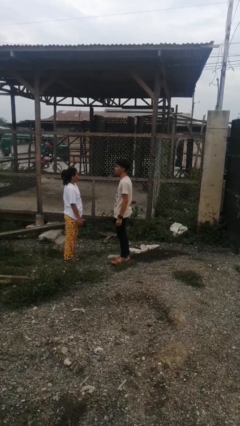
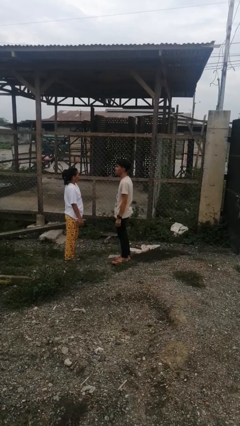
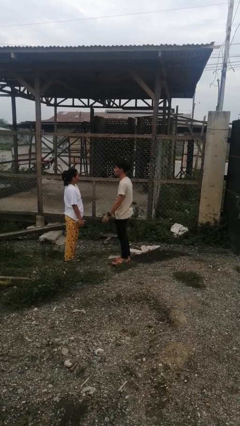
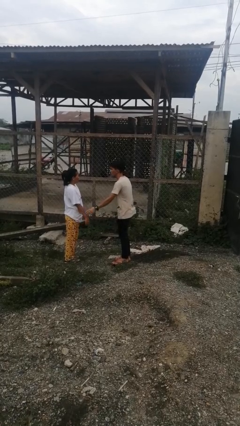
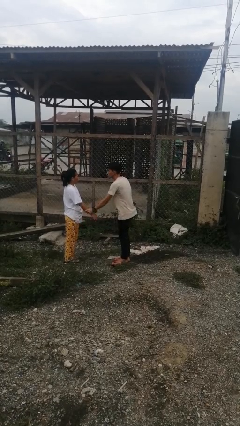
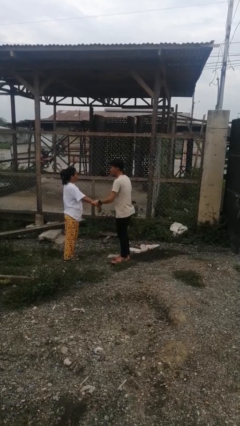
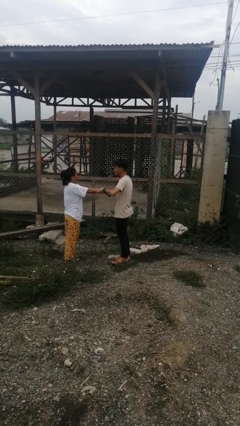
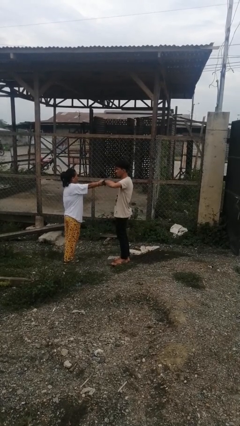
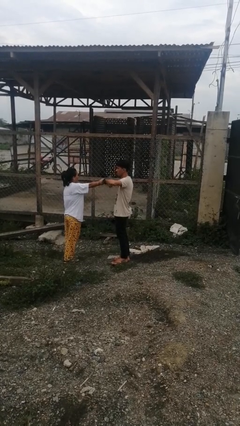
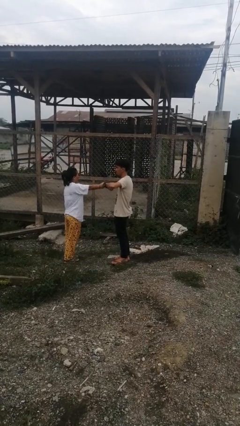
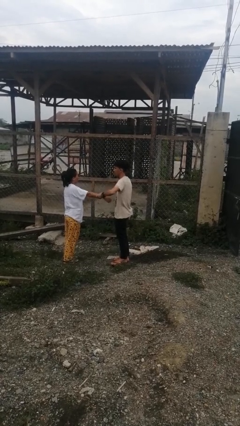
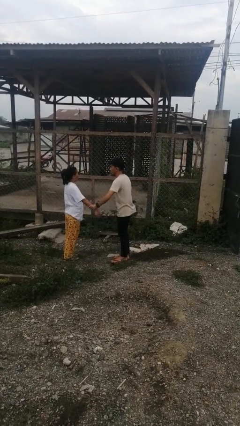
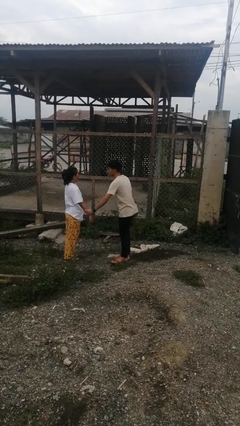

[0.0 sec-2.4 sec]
person grabs person by forearm

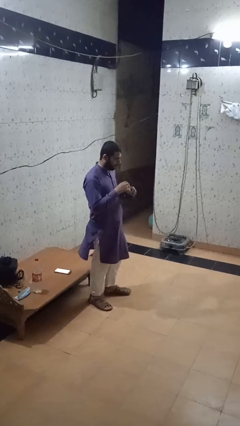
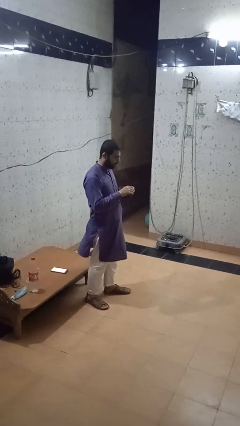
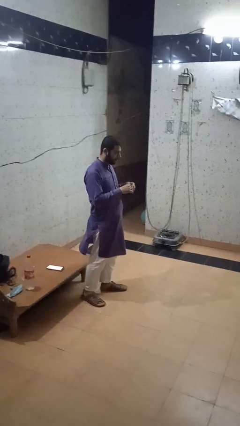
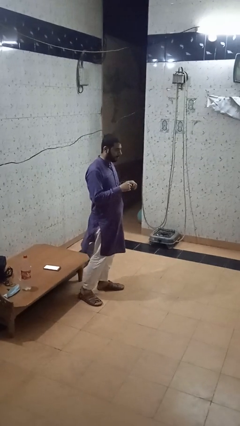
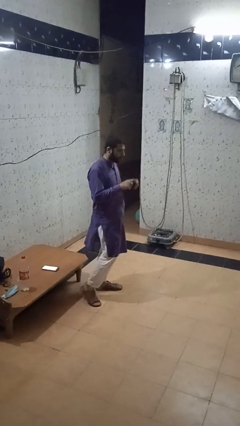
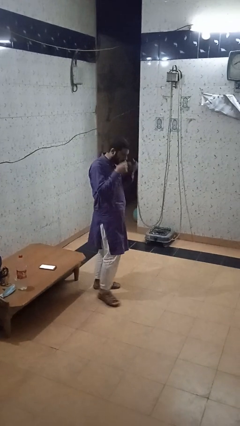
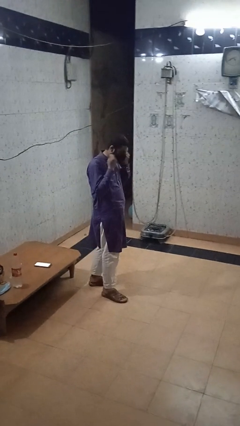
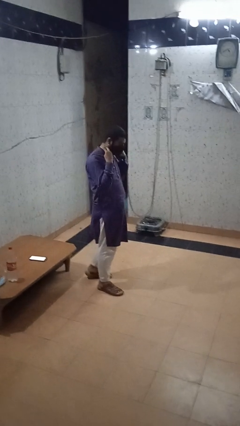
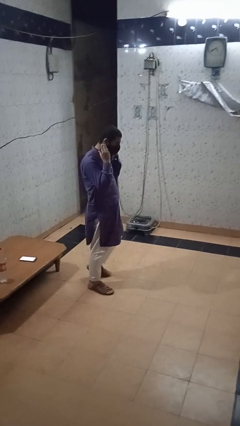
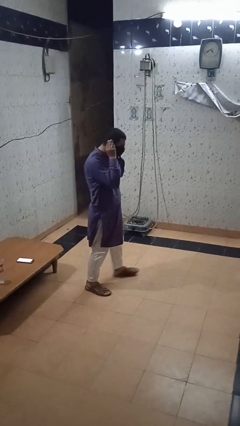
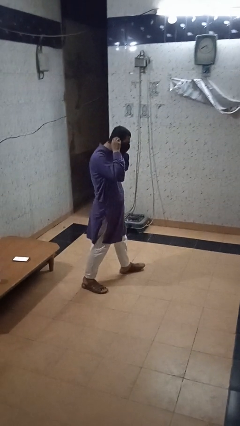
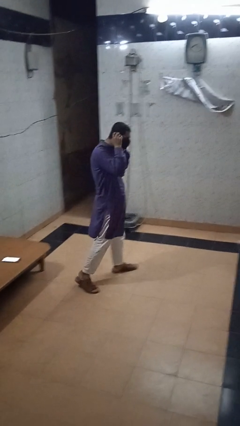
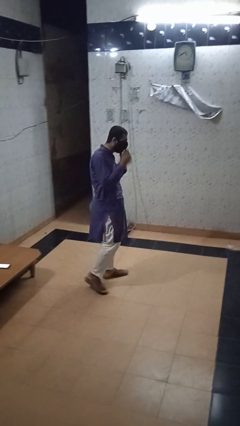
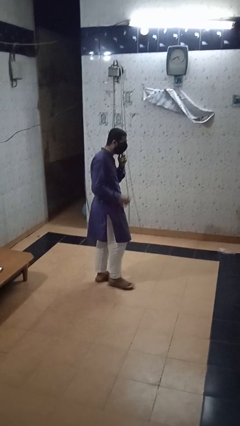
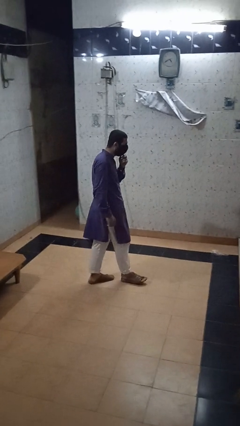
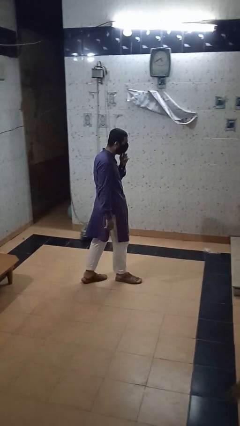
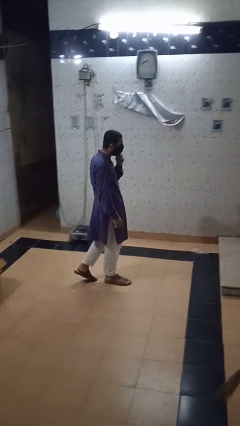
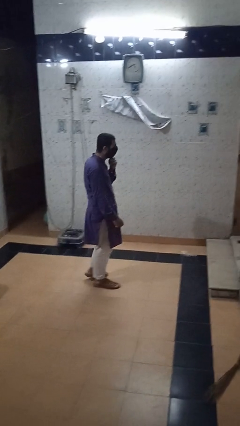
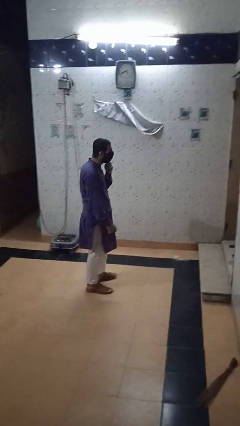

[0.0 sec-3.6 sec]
person puts on facemask

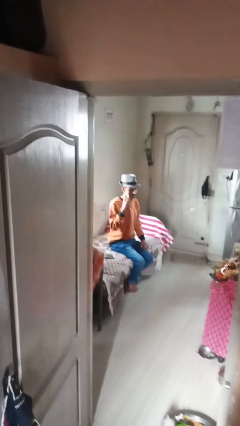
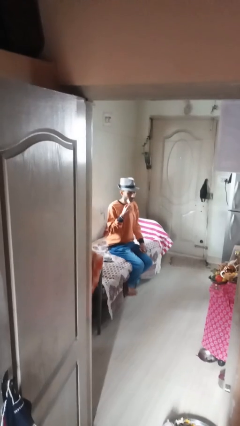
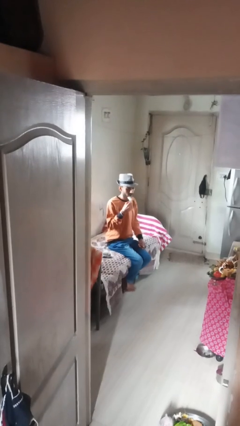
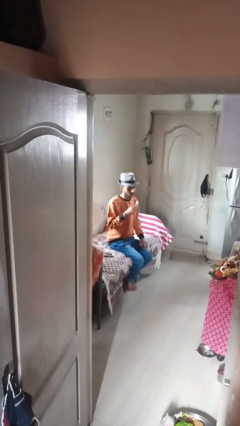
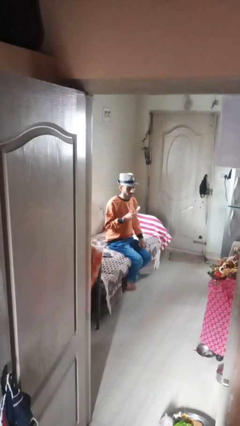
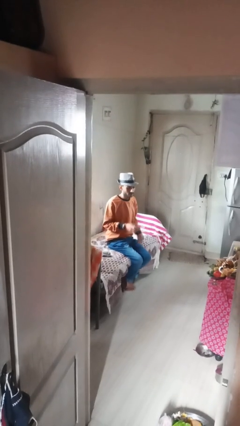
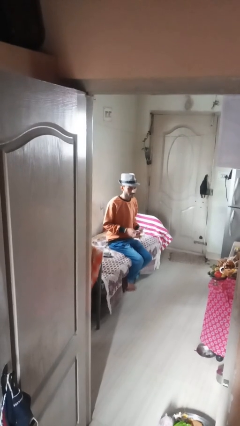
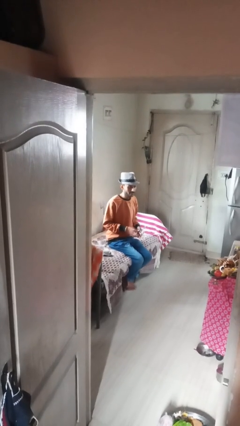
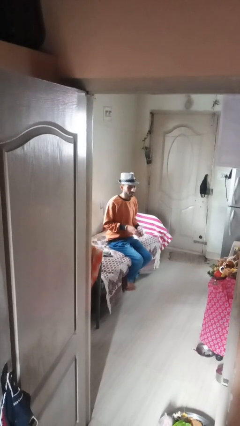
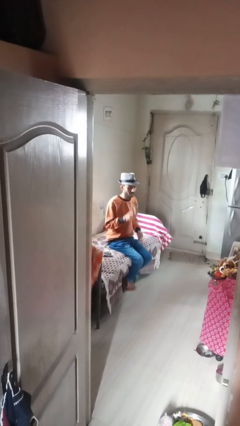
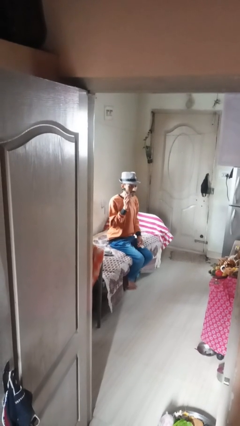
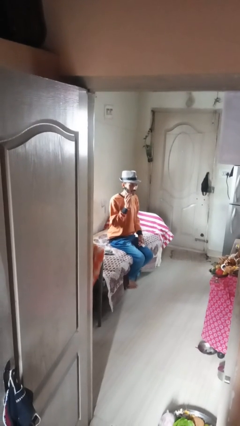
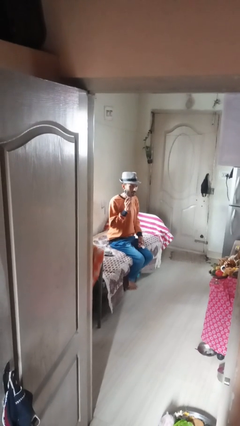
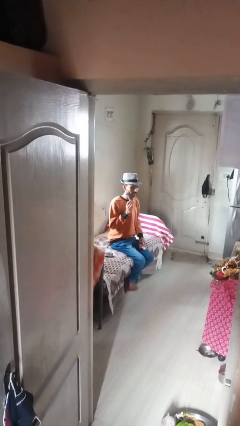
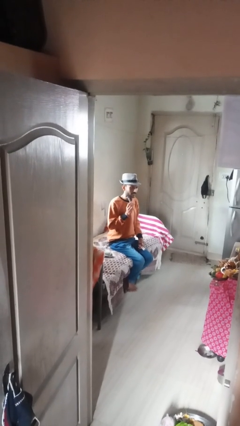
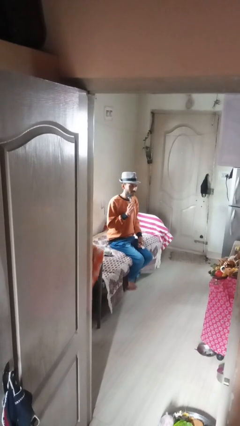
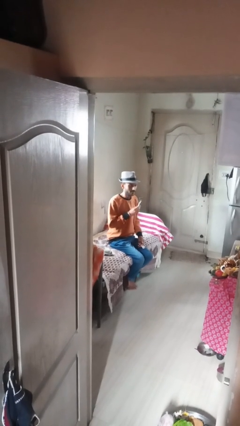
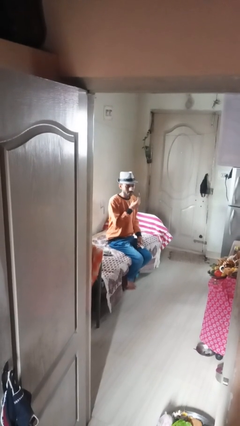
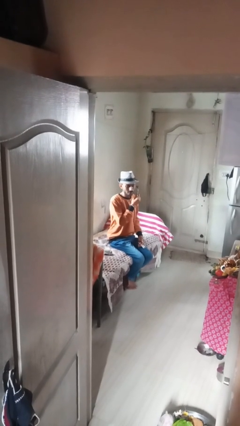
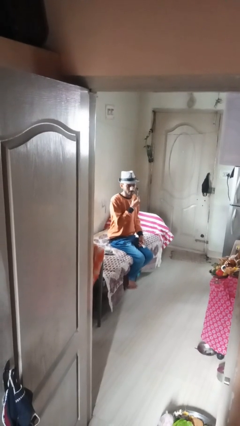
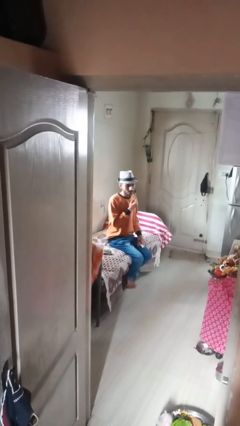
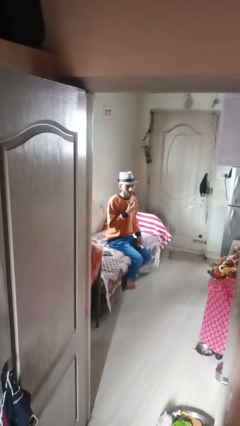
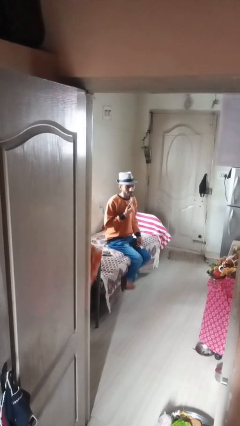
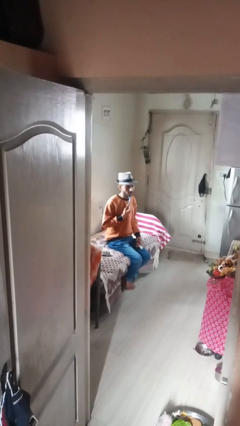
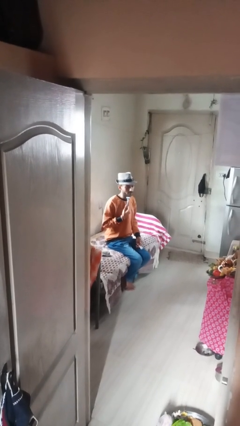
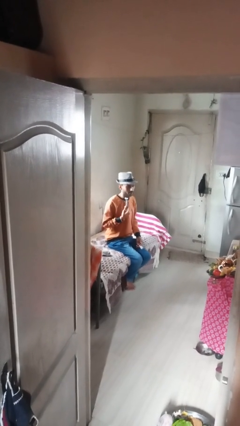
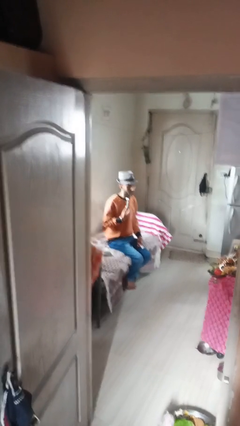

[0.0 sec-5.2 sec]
person shaves face

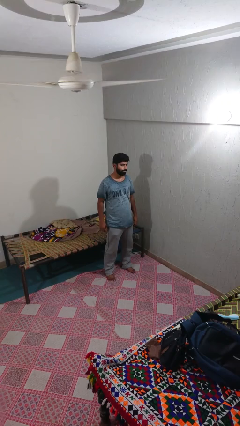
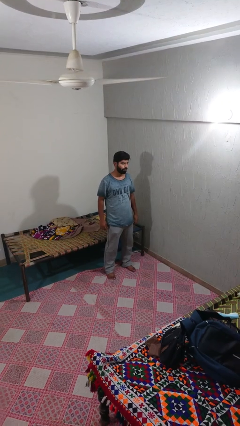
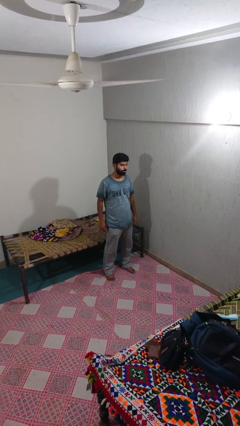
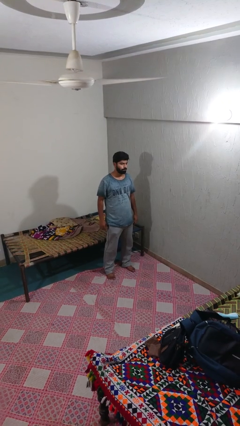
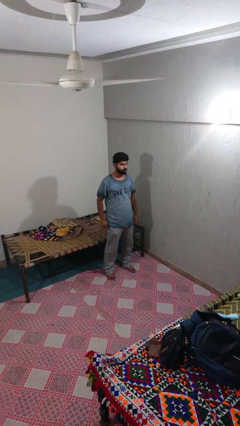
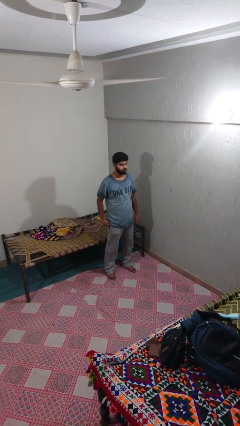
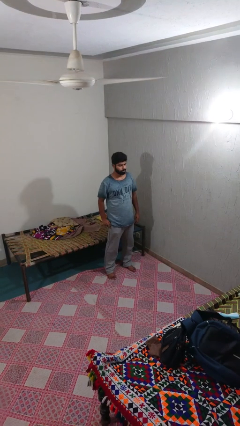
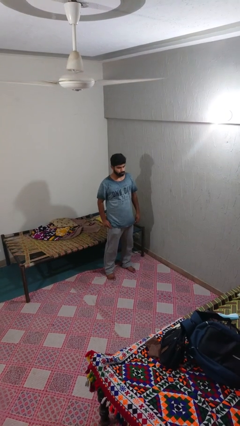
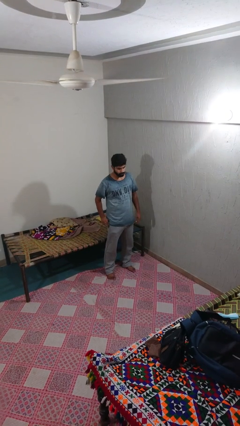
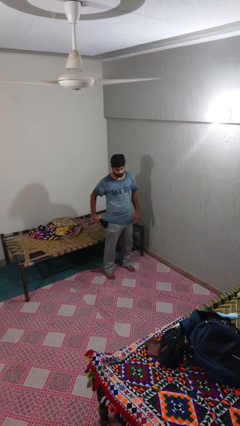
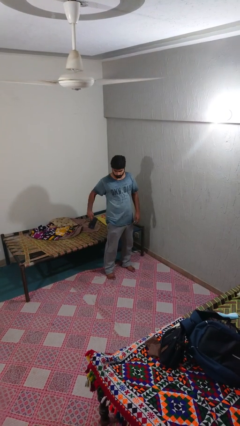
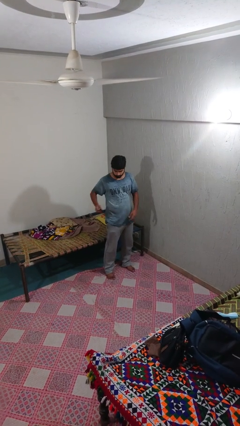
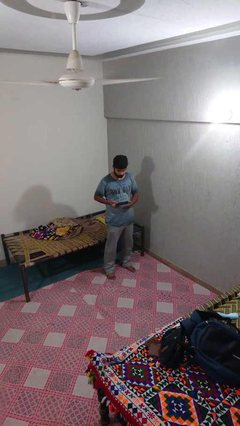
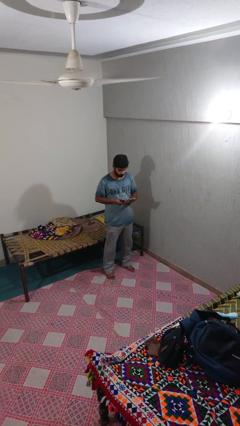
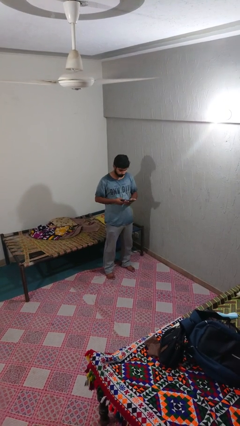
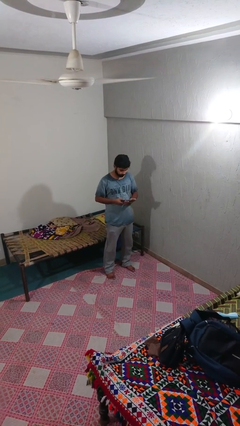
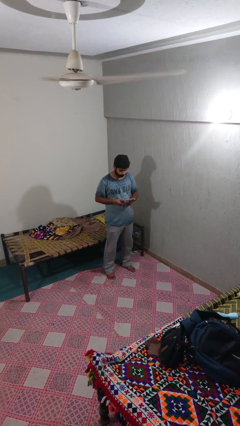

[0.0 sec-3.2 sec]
person takes phone from pocket

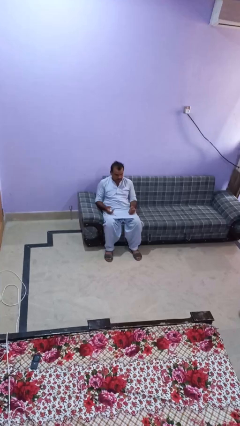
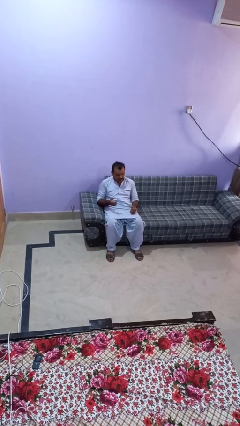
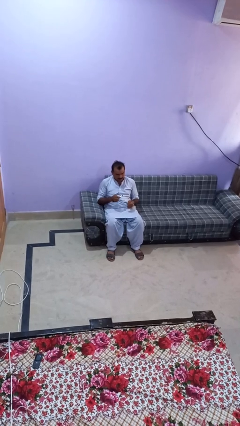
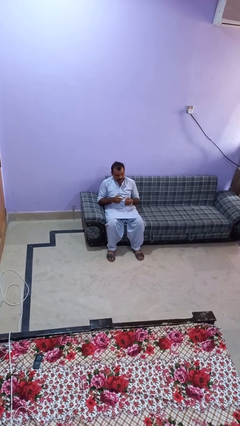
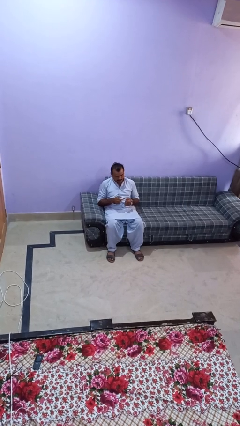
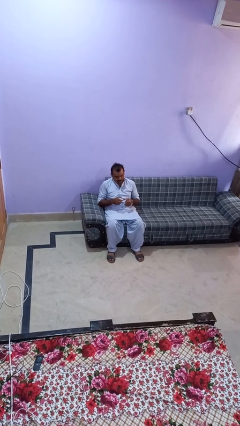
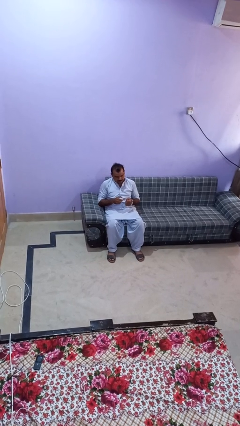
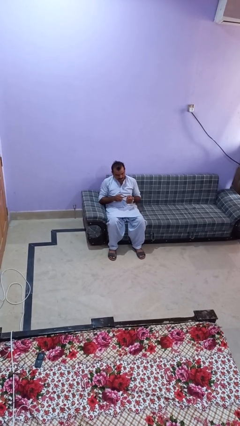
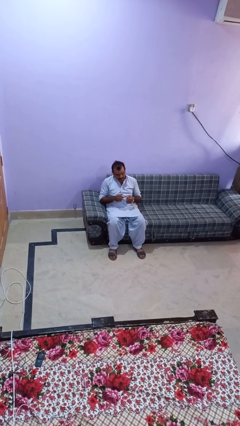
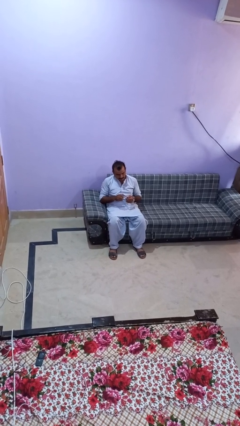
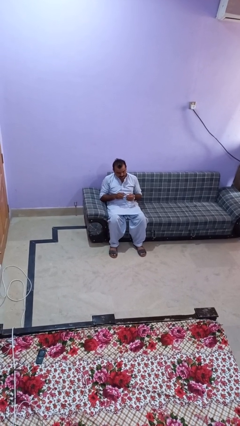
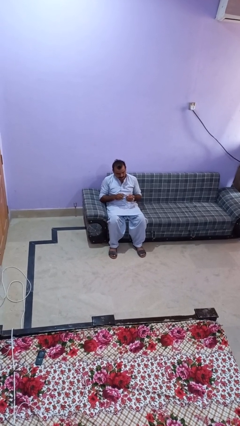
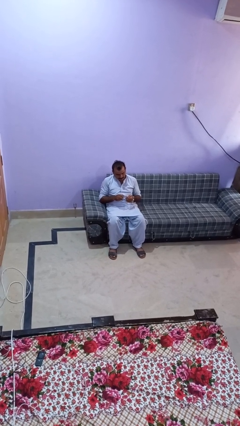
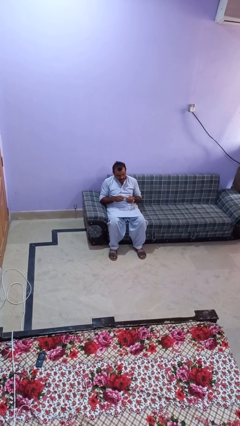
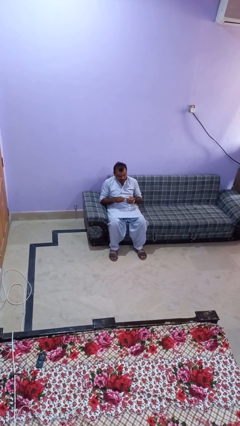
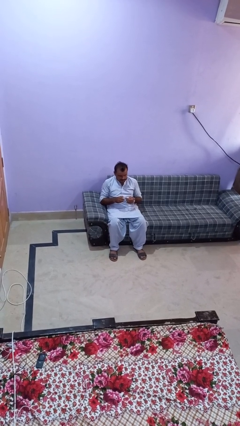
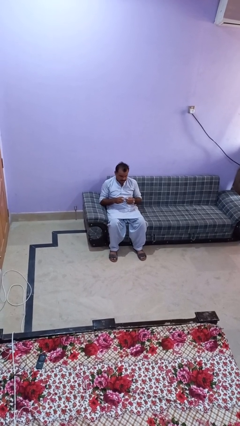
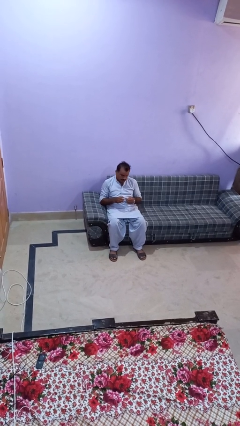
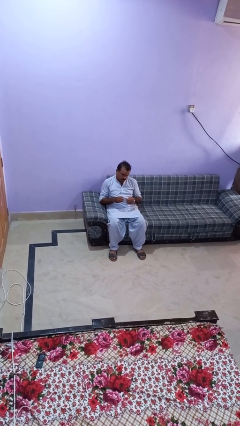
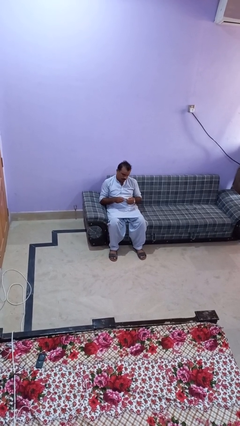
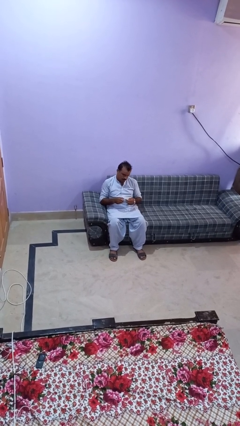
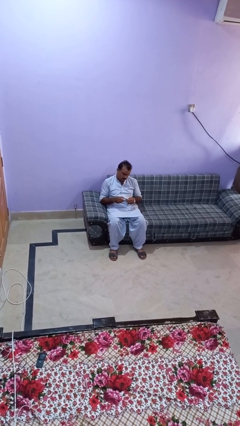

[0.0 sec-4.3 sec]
person clips fingernails
